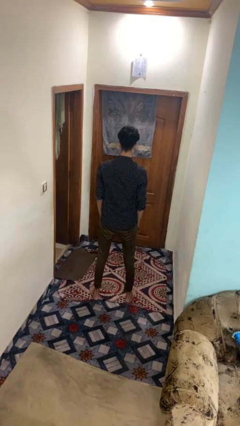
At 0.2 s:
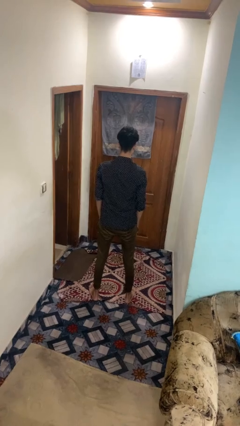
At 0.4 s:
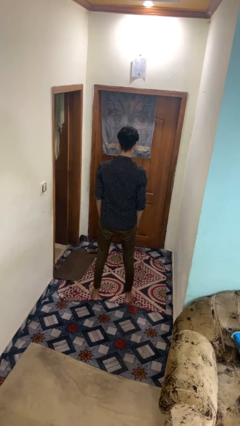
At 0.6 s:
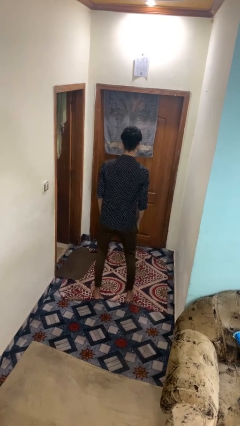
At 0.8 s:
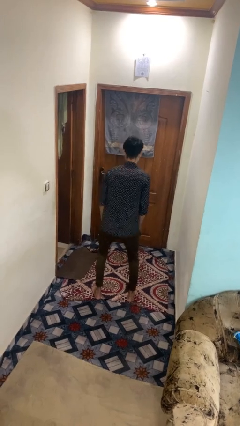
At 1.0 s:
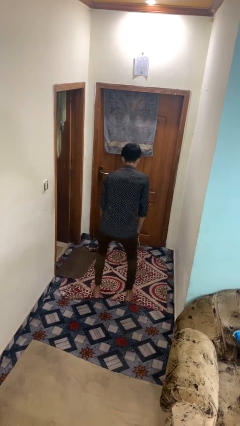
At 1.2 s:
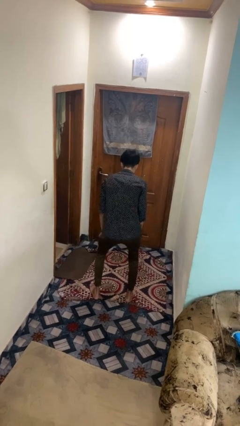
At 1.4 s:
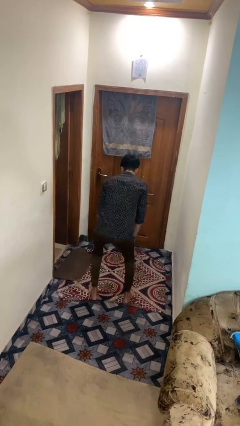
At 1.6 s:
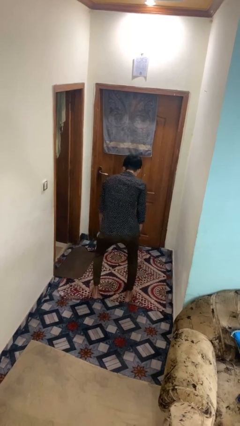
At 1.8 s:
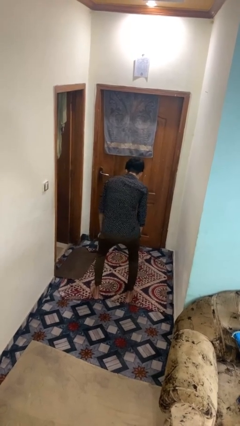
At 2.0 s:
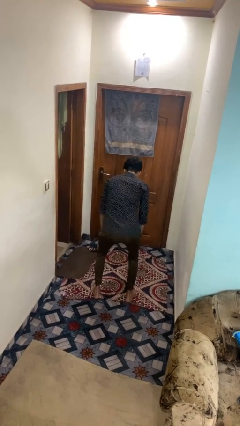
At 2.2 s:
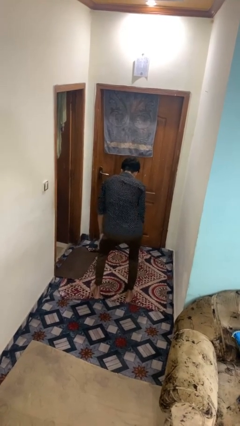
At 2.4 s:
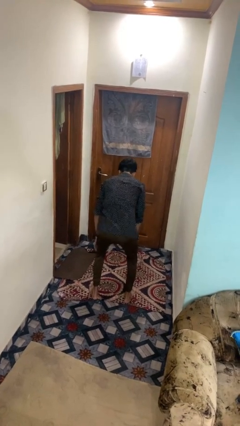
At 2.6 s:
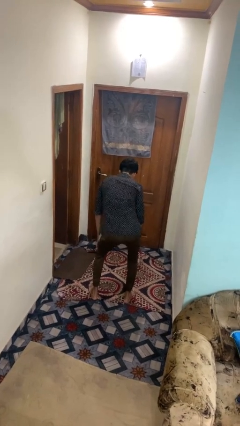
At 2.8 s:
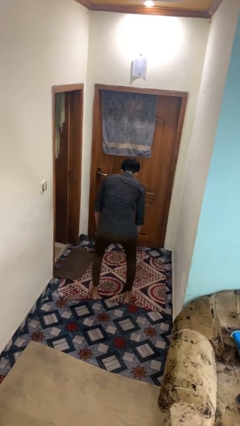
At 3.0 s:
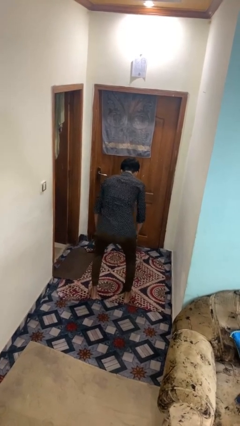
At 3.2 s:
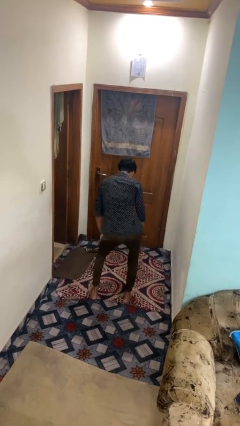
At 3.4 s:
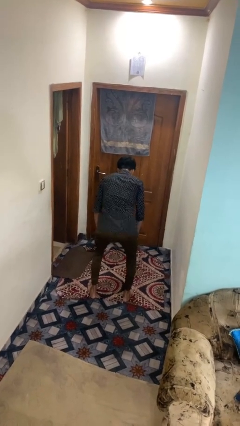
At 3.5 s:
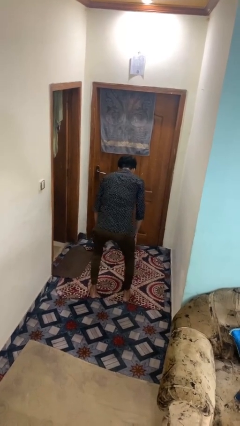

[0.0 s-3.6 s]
person wiggles hips

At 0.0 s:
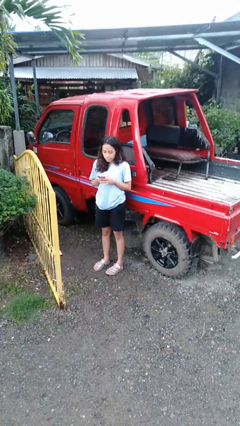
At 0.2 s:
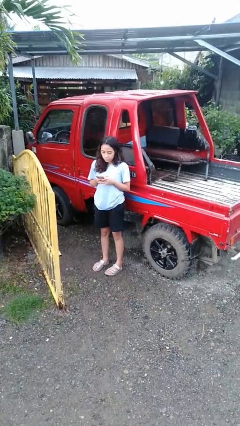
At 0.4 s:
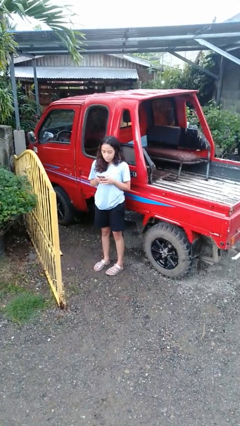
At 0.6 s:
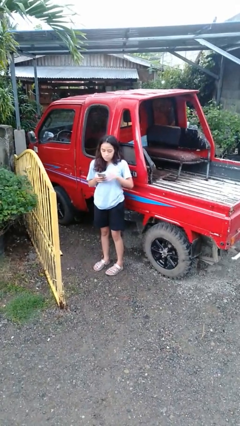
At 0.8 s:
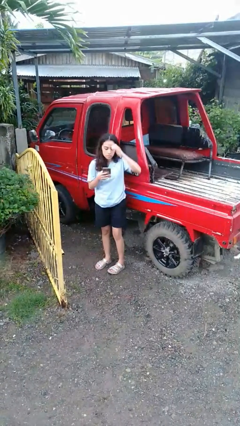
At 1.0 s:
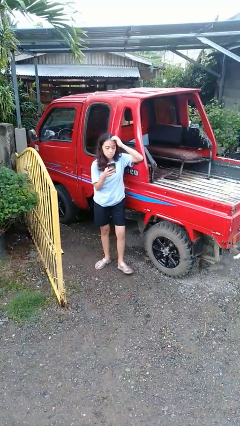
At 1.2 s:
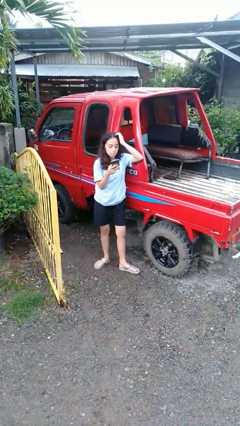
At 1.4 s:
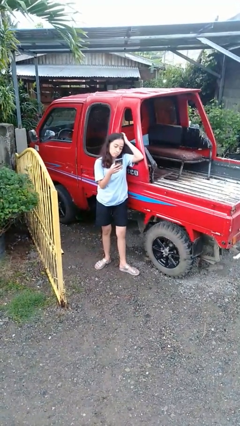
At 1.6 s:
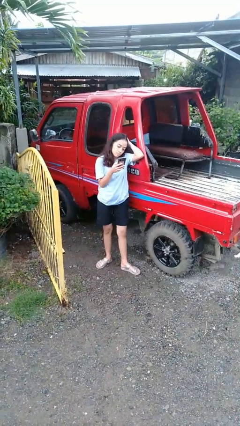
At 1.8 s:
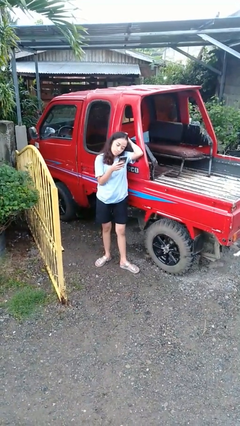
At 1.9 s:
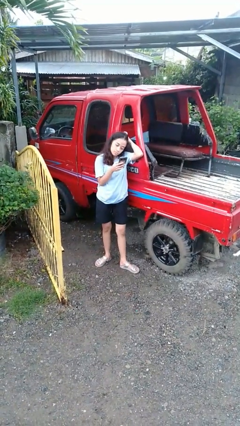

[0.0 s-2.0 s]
person leans against car

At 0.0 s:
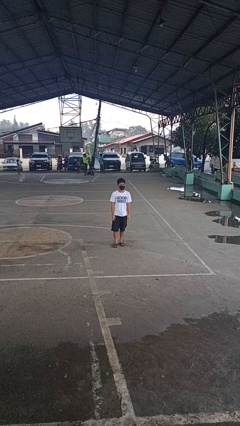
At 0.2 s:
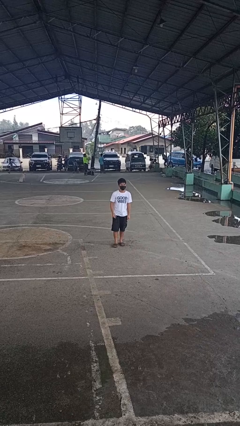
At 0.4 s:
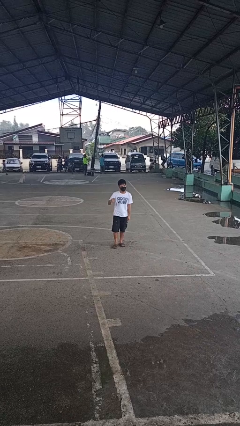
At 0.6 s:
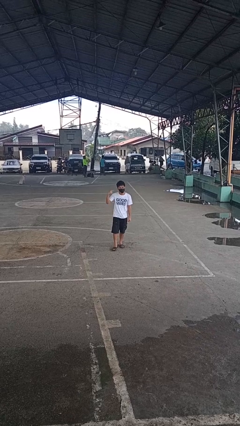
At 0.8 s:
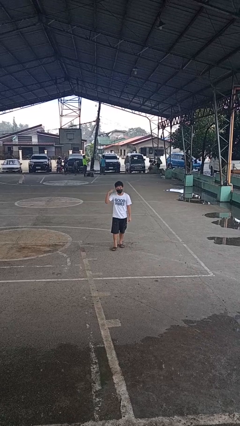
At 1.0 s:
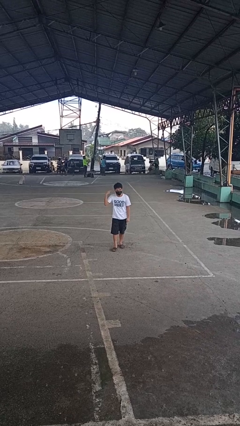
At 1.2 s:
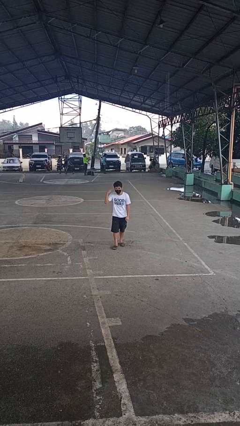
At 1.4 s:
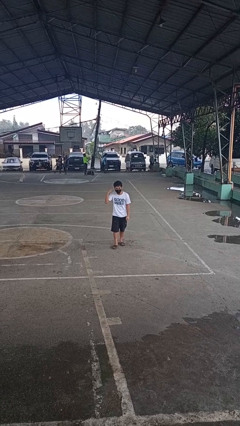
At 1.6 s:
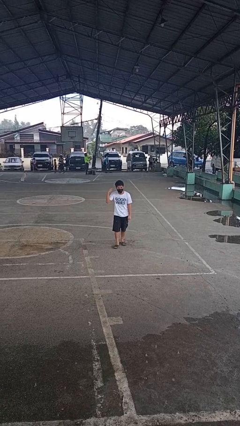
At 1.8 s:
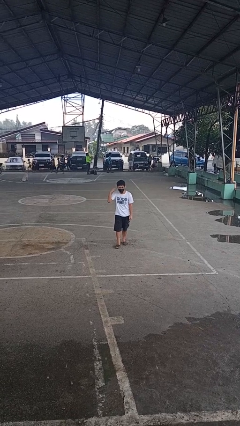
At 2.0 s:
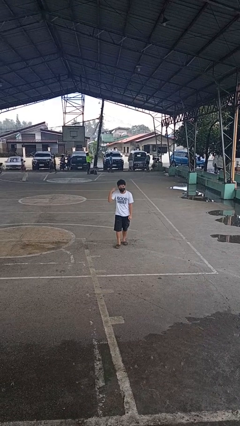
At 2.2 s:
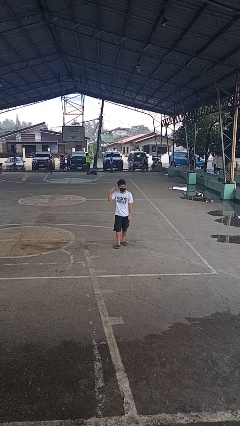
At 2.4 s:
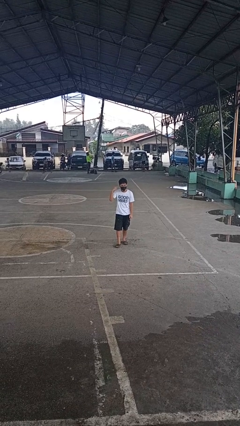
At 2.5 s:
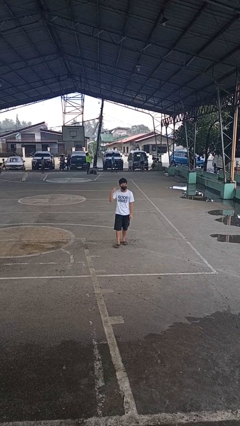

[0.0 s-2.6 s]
person gestures listen closely

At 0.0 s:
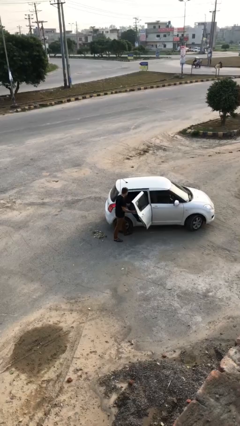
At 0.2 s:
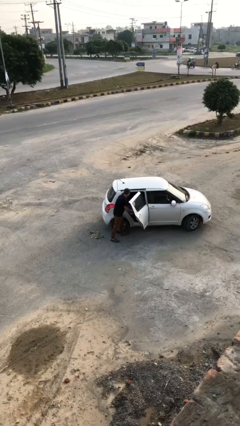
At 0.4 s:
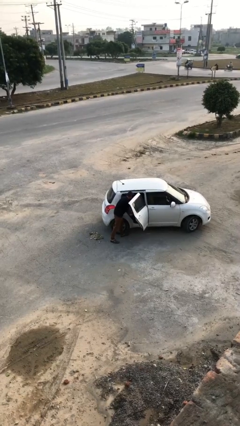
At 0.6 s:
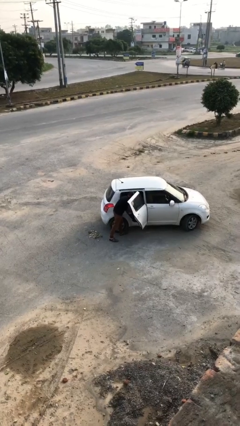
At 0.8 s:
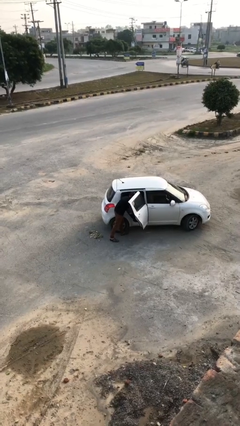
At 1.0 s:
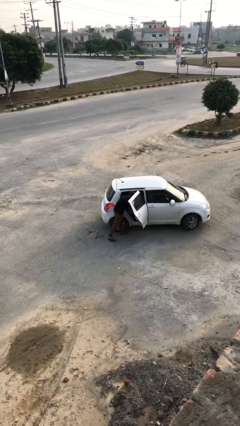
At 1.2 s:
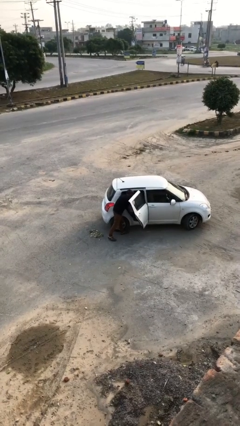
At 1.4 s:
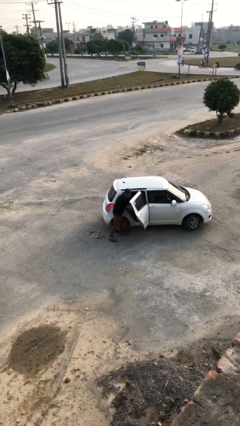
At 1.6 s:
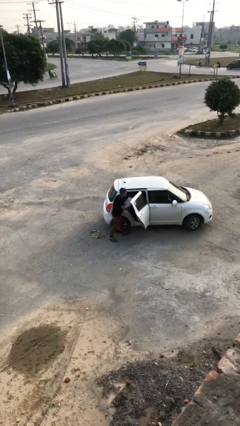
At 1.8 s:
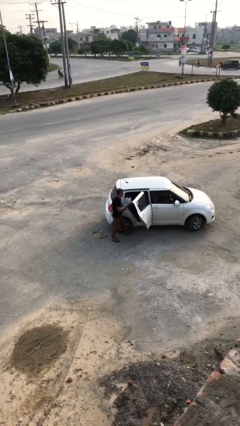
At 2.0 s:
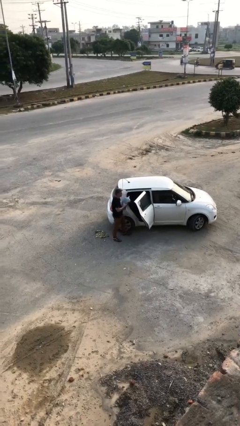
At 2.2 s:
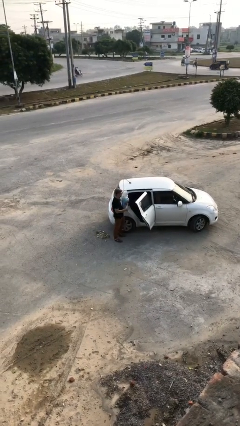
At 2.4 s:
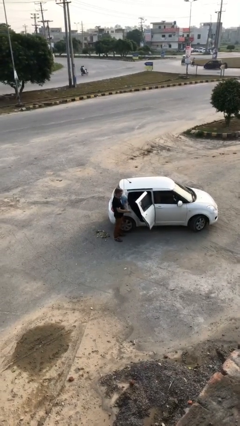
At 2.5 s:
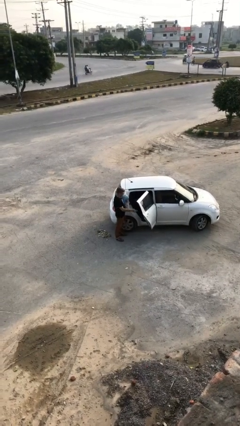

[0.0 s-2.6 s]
person unloads car

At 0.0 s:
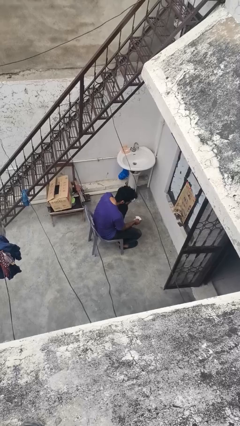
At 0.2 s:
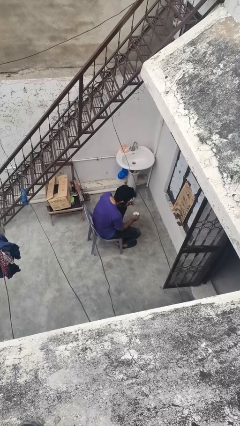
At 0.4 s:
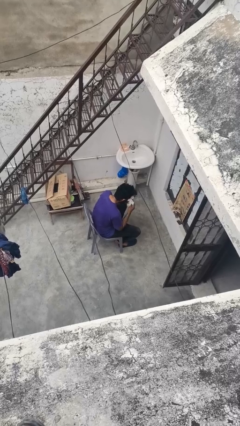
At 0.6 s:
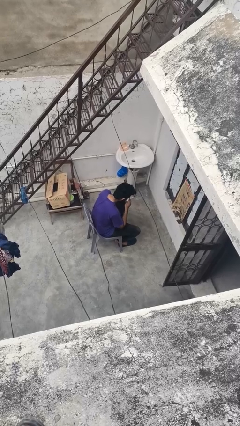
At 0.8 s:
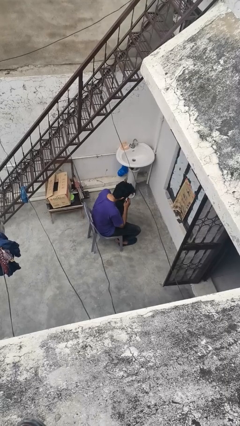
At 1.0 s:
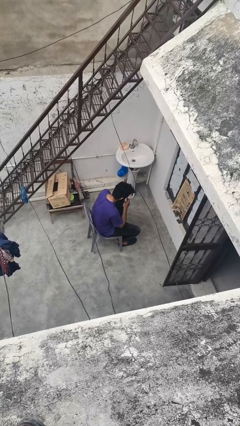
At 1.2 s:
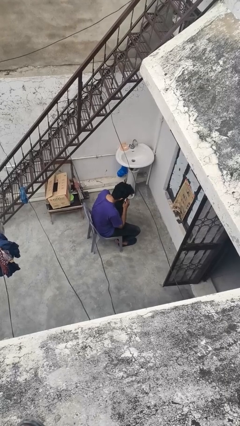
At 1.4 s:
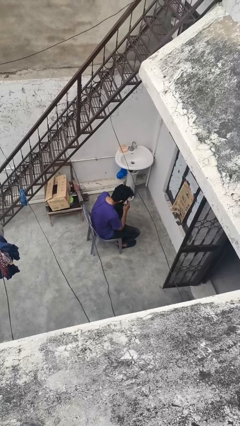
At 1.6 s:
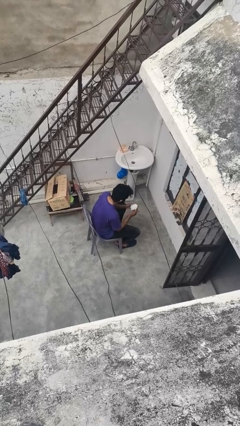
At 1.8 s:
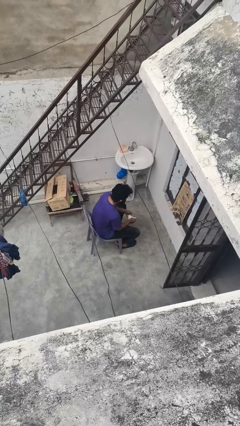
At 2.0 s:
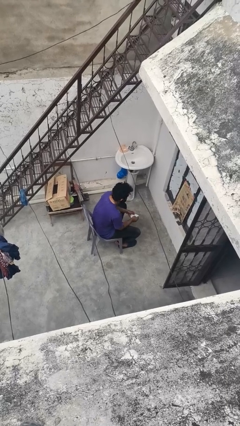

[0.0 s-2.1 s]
person blows nose

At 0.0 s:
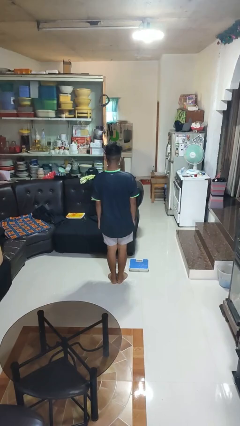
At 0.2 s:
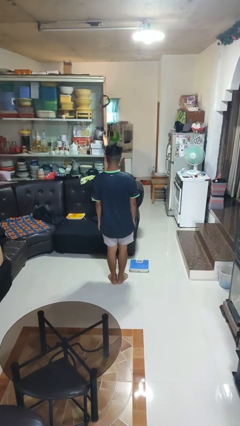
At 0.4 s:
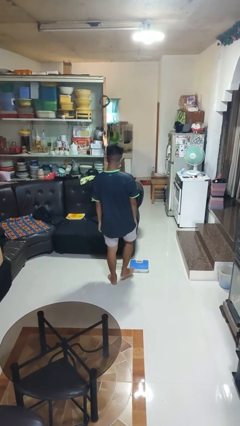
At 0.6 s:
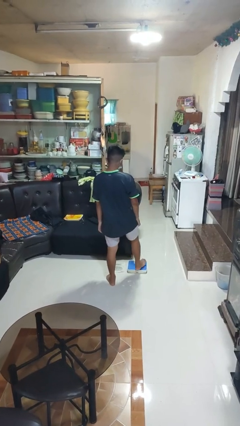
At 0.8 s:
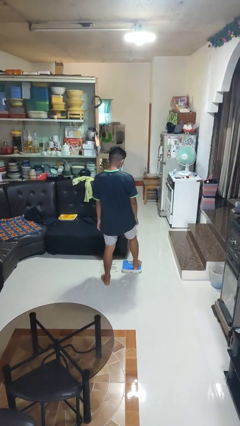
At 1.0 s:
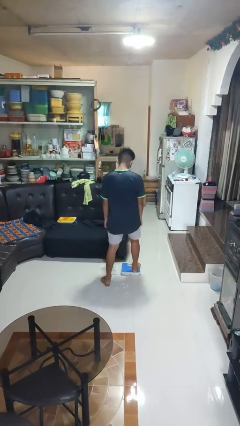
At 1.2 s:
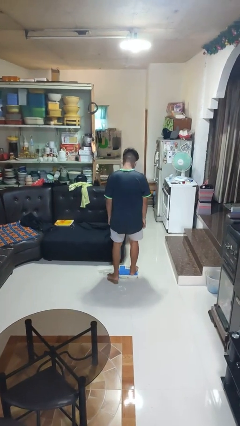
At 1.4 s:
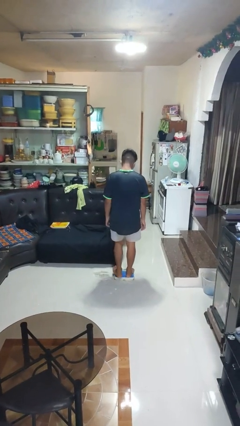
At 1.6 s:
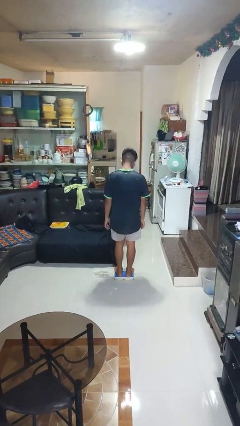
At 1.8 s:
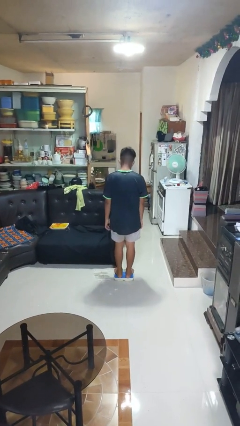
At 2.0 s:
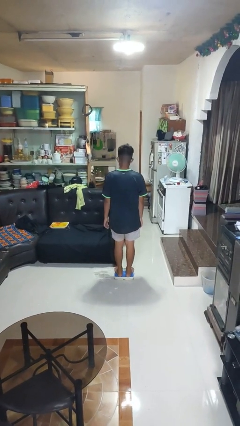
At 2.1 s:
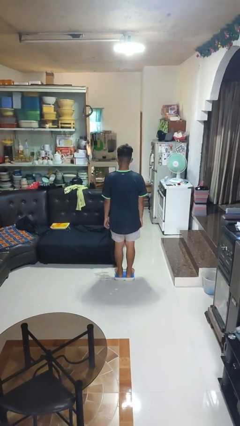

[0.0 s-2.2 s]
person uses bodyweight scale

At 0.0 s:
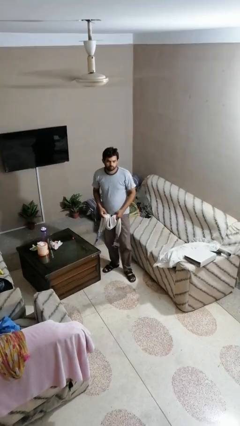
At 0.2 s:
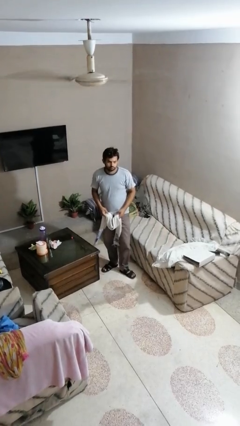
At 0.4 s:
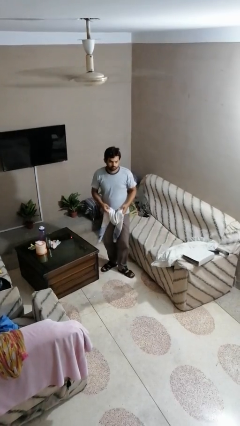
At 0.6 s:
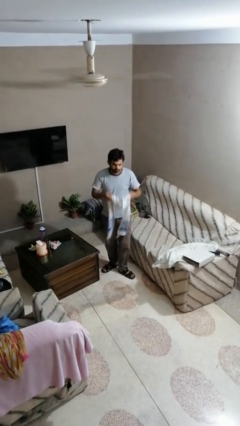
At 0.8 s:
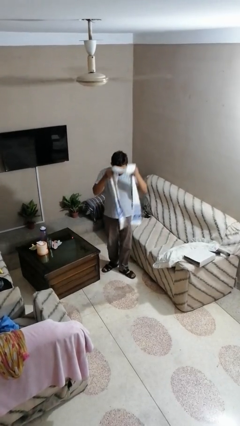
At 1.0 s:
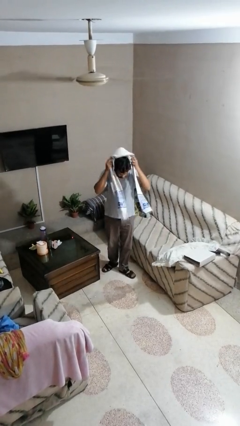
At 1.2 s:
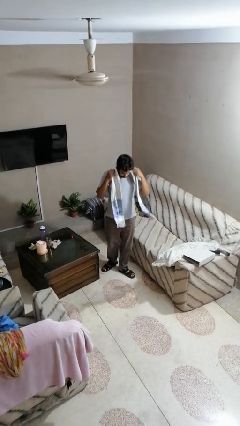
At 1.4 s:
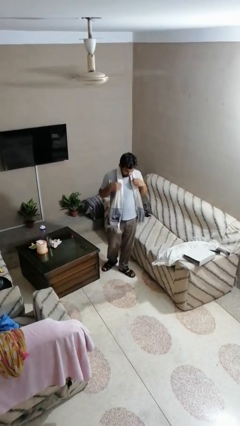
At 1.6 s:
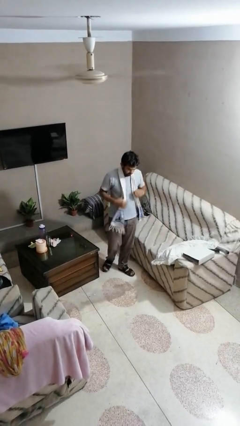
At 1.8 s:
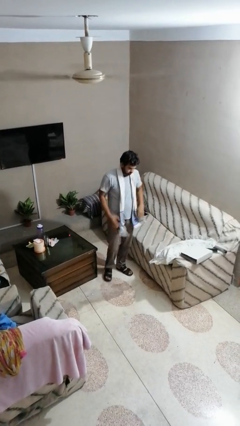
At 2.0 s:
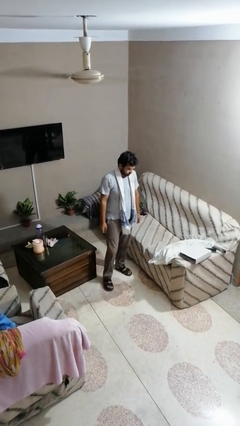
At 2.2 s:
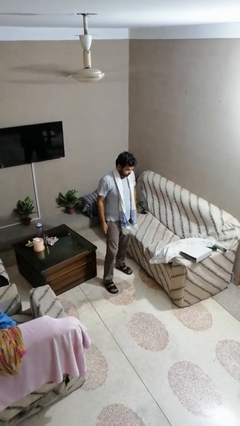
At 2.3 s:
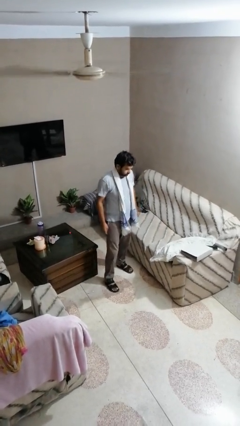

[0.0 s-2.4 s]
person puts on scarf
